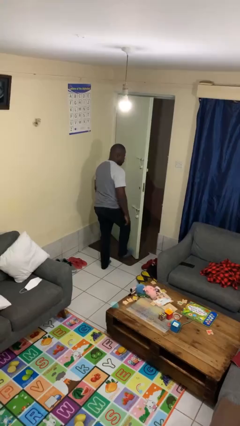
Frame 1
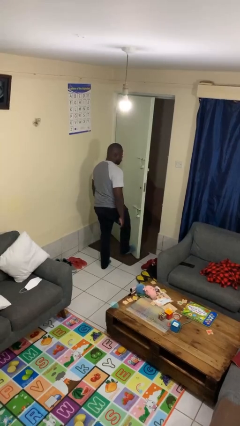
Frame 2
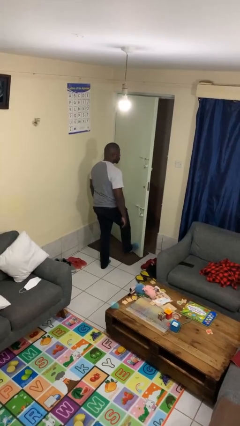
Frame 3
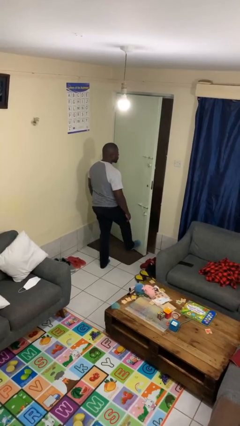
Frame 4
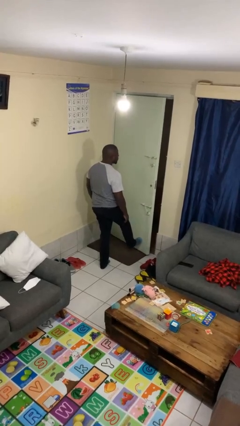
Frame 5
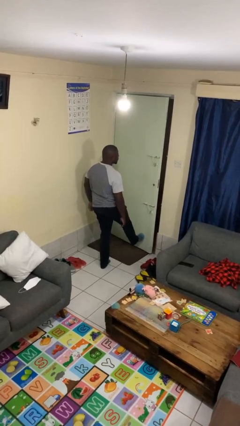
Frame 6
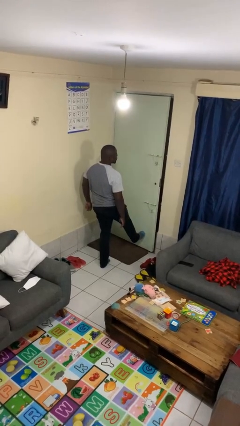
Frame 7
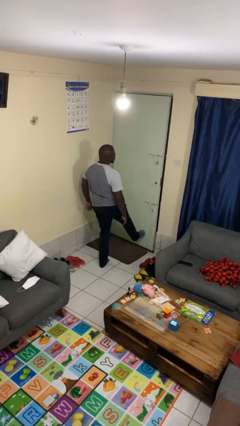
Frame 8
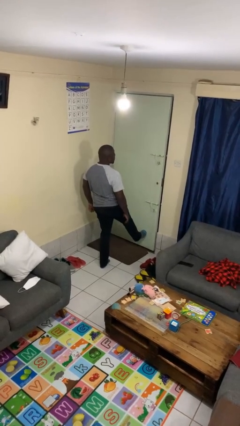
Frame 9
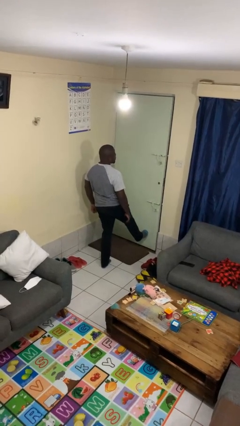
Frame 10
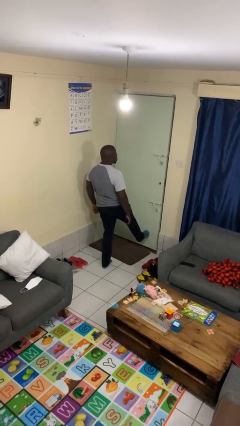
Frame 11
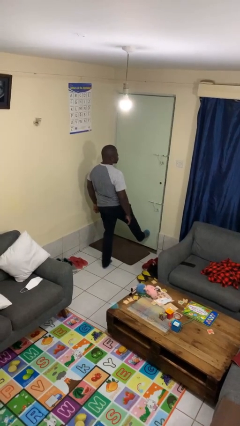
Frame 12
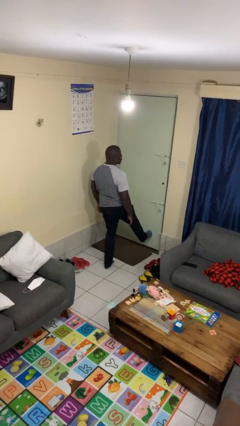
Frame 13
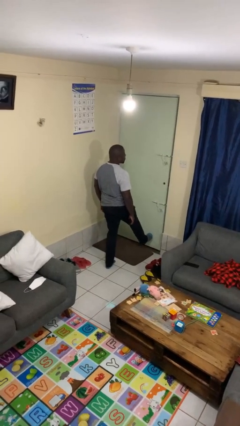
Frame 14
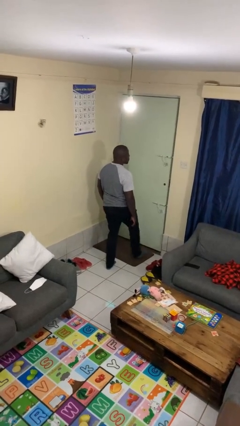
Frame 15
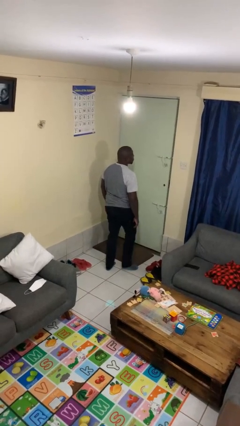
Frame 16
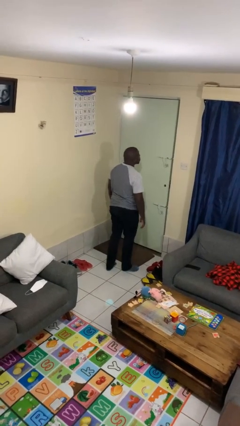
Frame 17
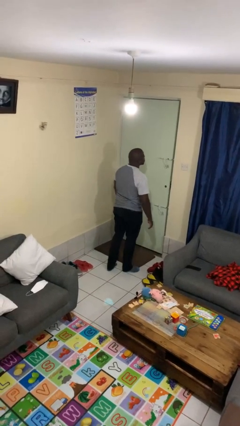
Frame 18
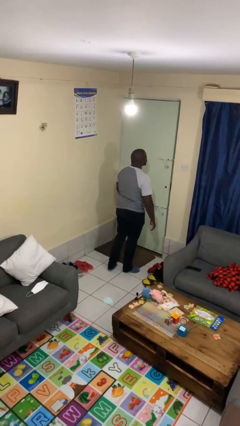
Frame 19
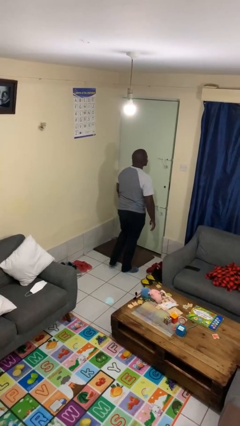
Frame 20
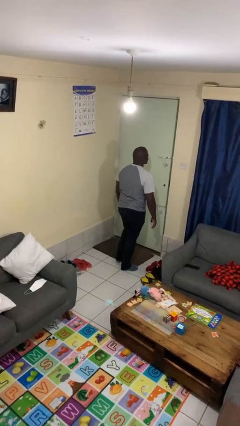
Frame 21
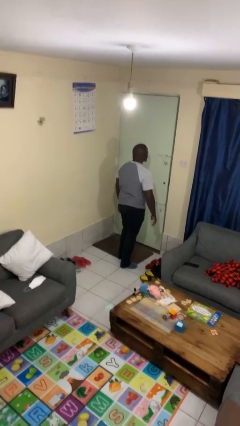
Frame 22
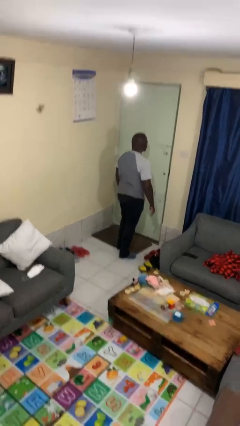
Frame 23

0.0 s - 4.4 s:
person closes door with foot

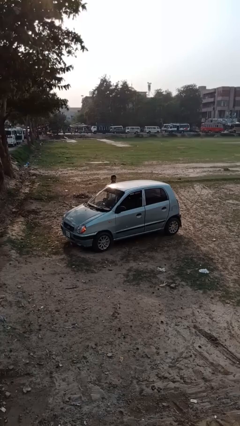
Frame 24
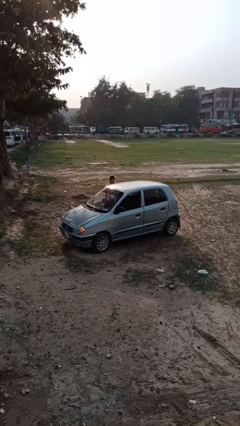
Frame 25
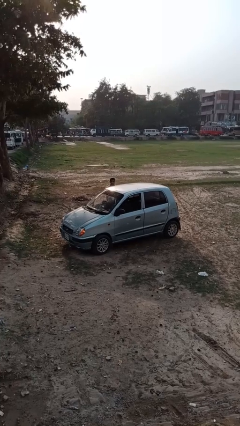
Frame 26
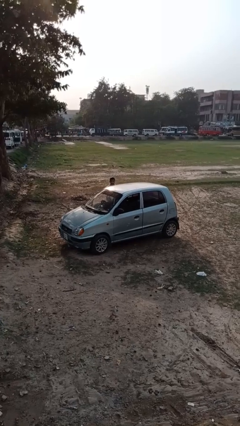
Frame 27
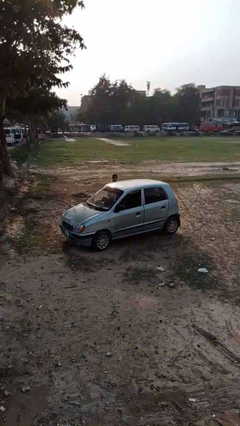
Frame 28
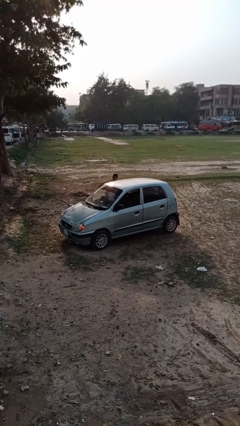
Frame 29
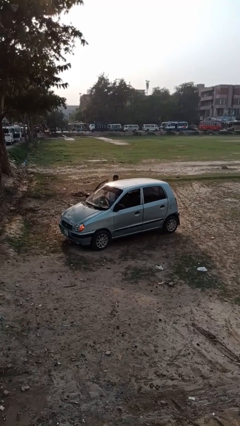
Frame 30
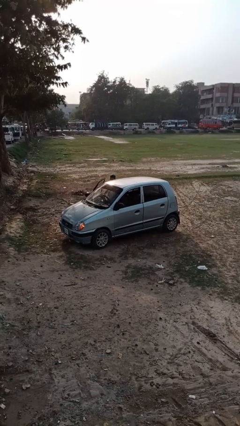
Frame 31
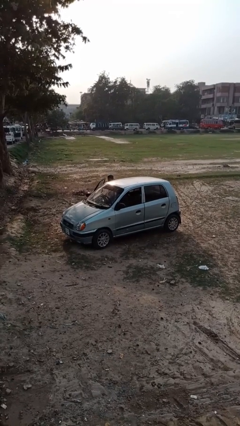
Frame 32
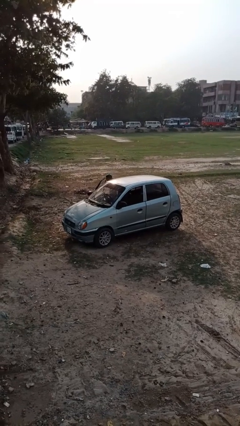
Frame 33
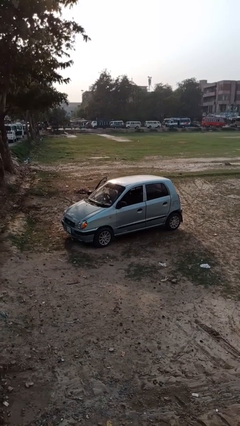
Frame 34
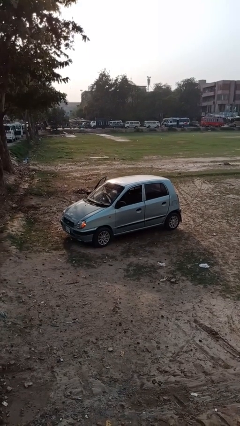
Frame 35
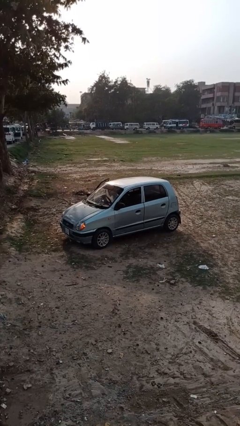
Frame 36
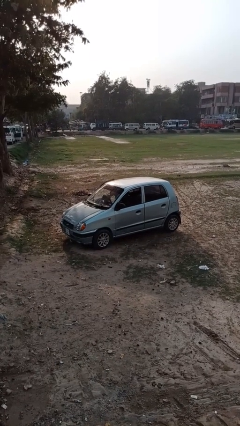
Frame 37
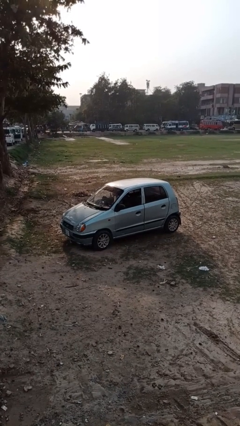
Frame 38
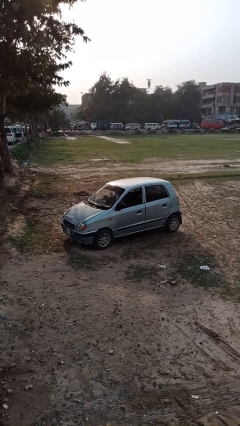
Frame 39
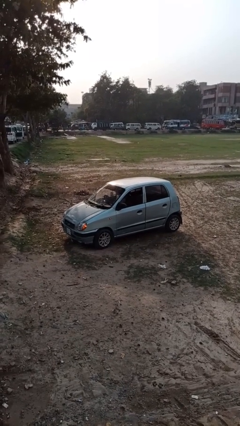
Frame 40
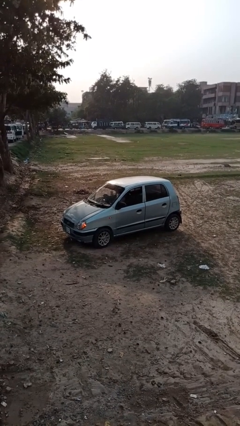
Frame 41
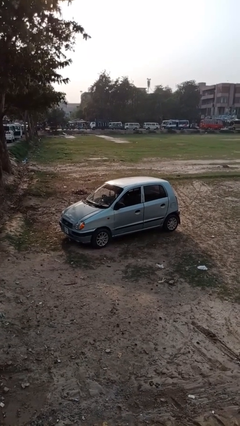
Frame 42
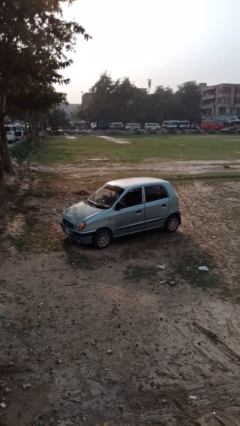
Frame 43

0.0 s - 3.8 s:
car picks up person

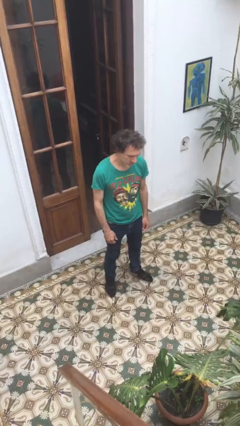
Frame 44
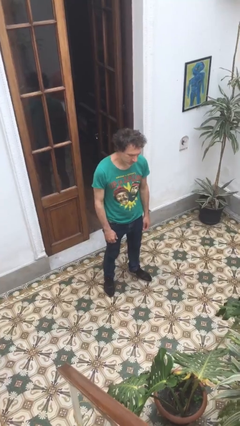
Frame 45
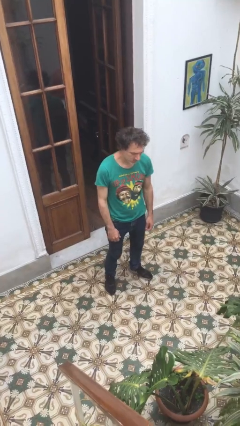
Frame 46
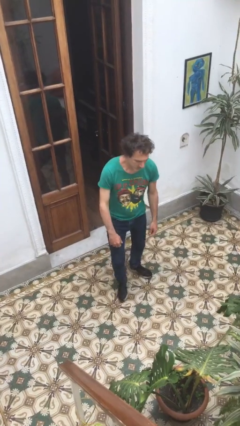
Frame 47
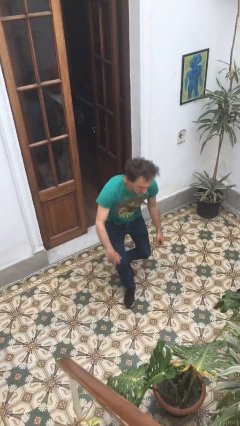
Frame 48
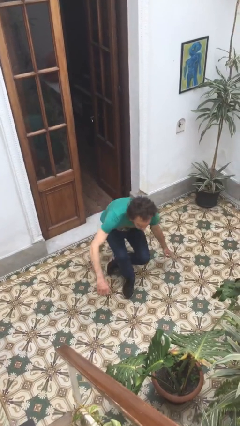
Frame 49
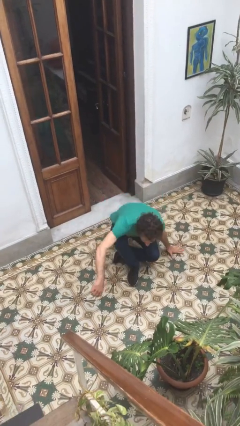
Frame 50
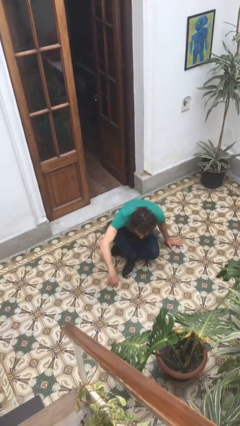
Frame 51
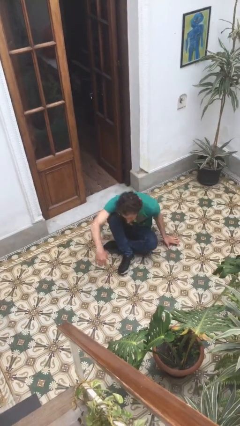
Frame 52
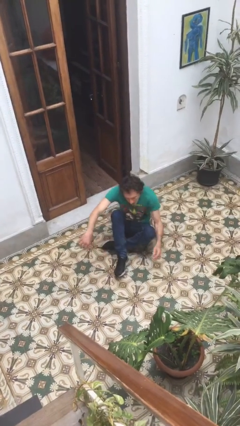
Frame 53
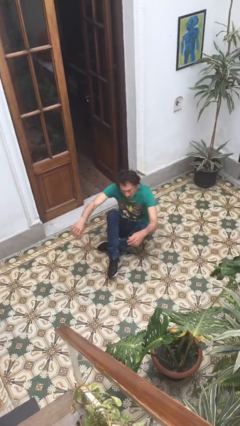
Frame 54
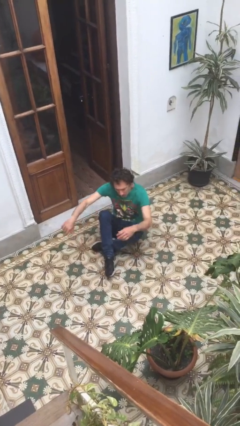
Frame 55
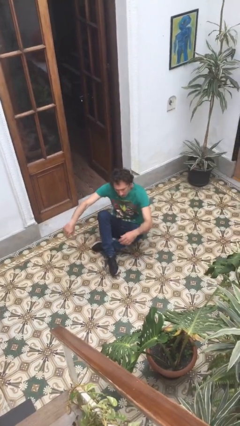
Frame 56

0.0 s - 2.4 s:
person sits down

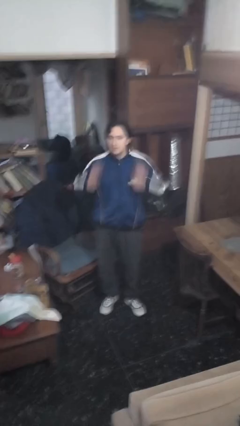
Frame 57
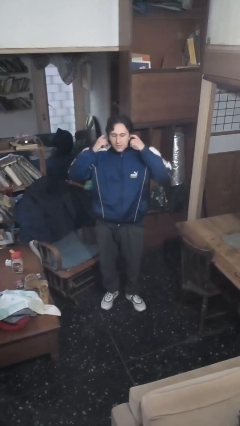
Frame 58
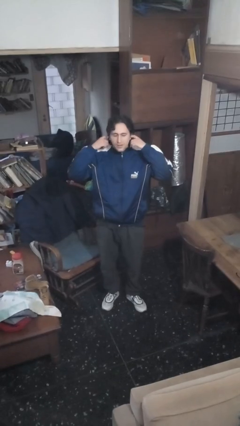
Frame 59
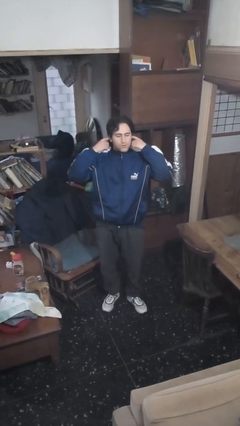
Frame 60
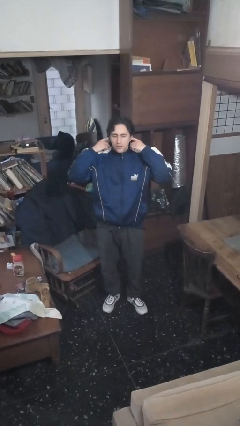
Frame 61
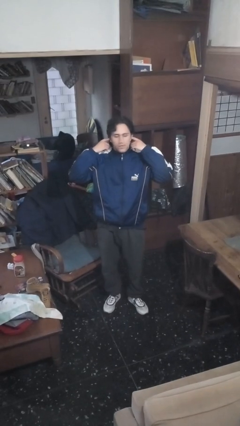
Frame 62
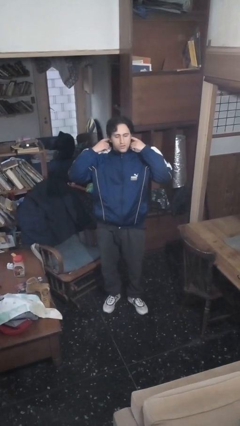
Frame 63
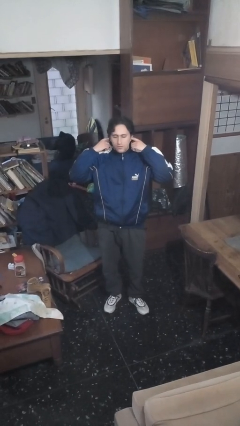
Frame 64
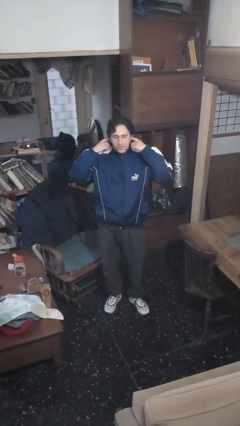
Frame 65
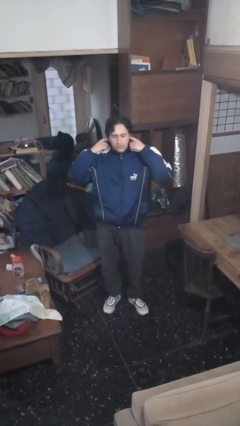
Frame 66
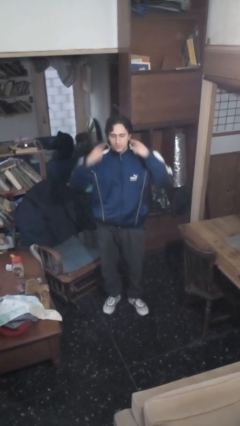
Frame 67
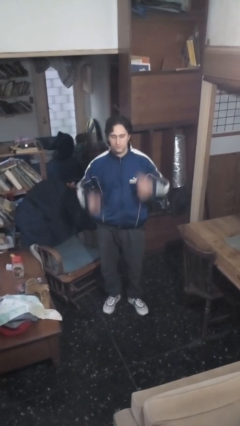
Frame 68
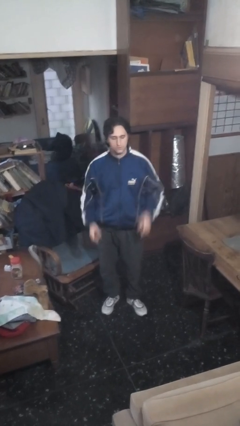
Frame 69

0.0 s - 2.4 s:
person puts fingers in ear

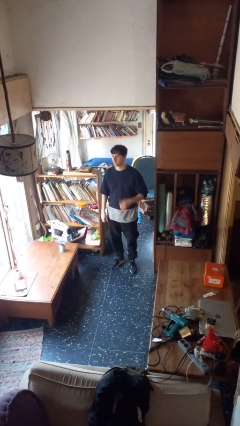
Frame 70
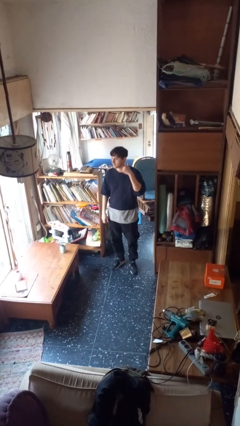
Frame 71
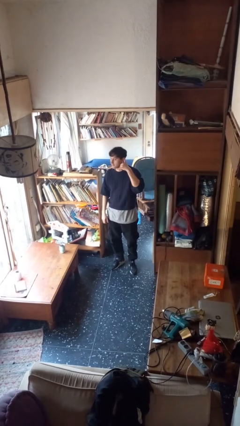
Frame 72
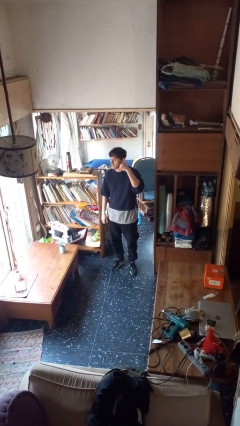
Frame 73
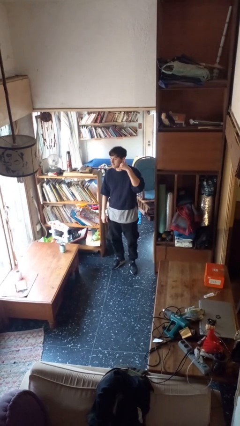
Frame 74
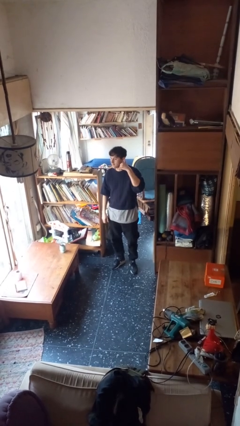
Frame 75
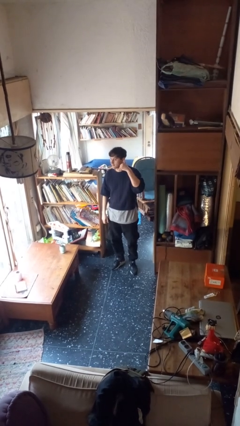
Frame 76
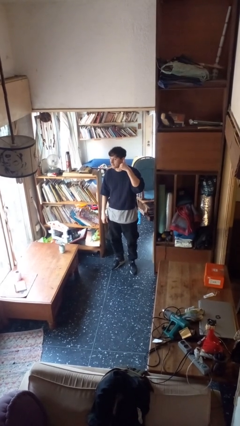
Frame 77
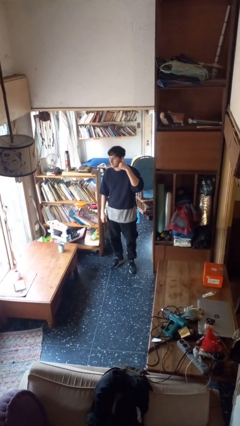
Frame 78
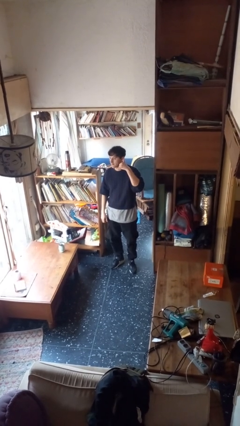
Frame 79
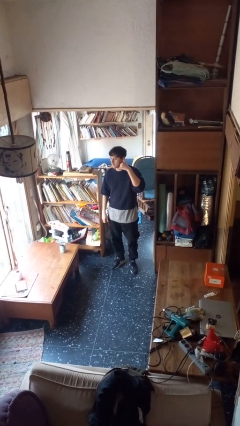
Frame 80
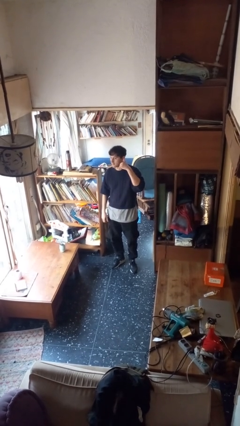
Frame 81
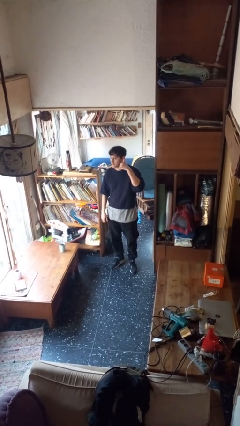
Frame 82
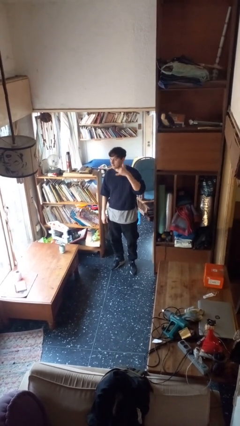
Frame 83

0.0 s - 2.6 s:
person gestures call me

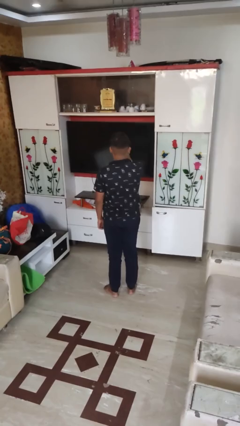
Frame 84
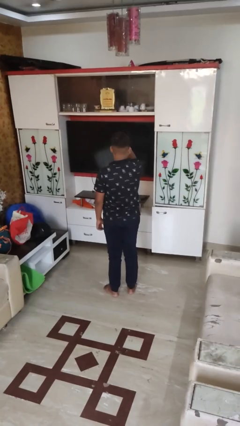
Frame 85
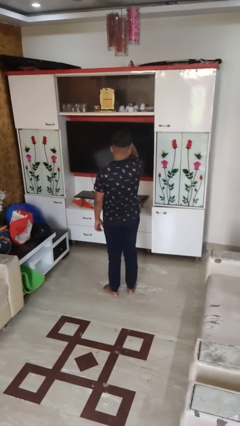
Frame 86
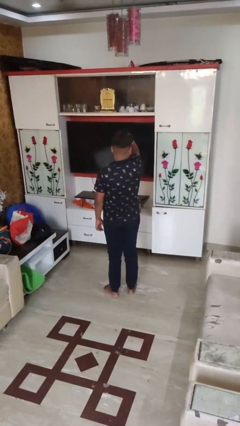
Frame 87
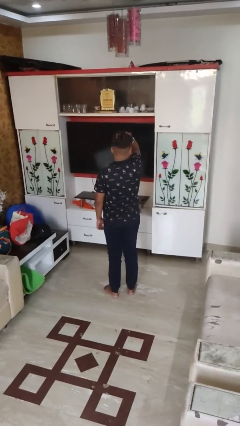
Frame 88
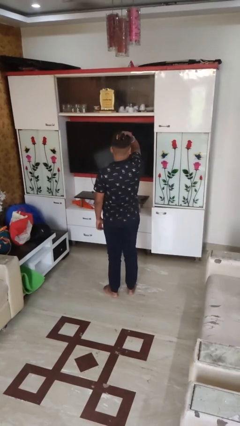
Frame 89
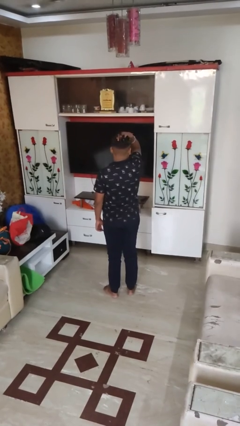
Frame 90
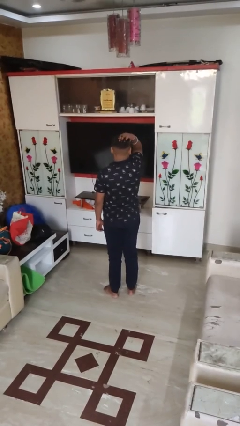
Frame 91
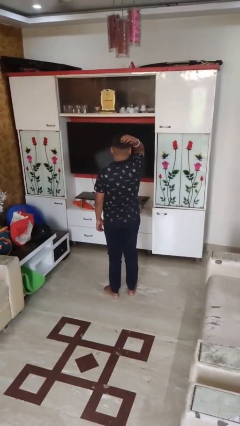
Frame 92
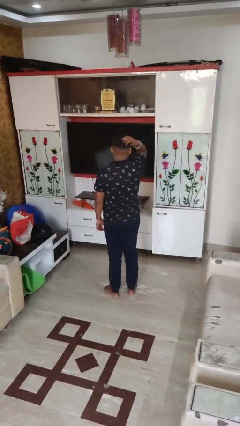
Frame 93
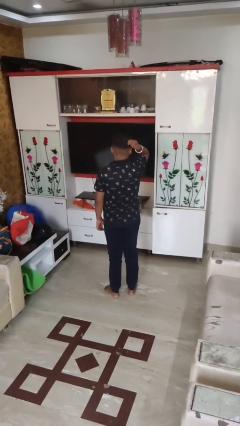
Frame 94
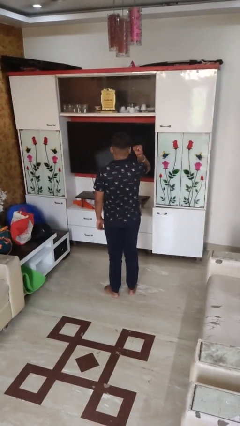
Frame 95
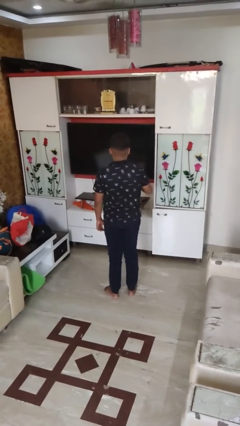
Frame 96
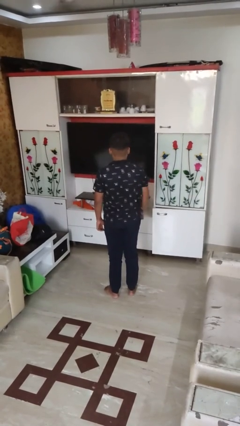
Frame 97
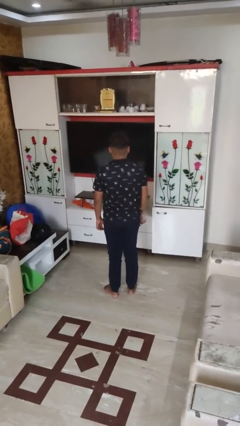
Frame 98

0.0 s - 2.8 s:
person strokes hair
